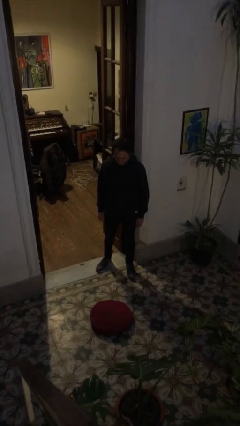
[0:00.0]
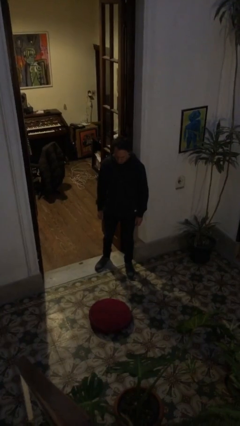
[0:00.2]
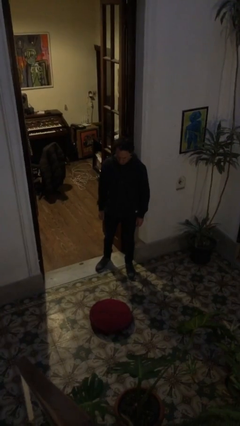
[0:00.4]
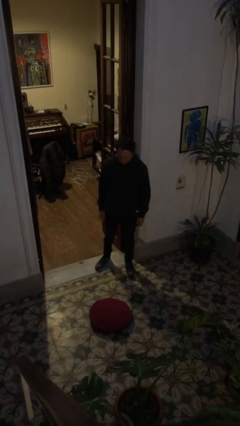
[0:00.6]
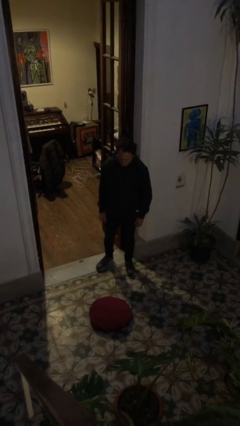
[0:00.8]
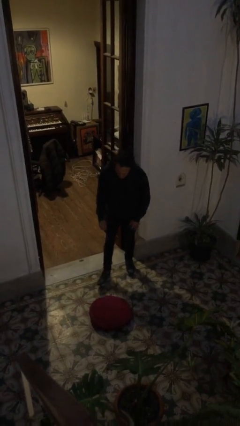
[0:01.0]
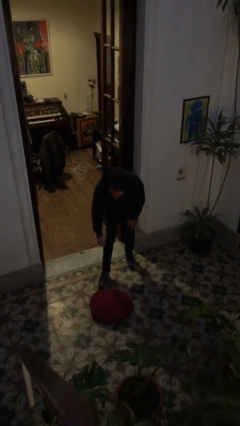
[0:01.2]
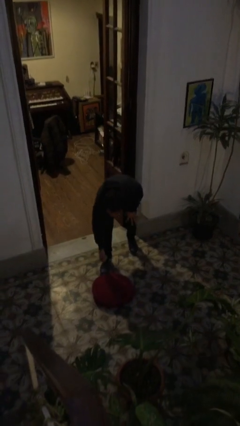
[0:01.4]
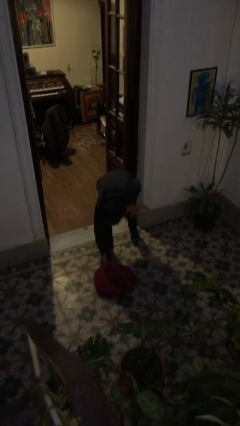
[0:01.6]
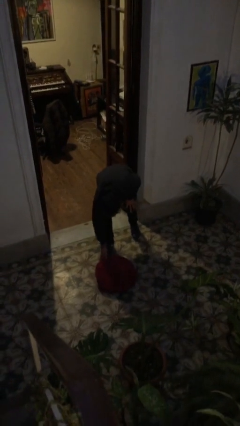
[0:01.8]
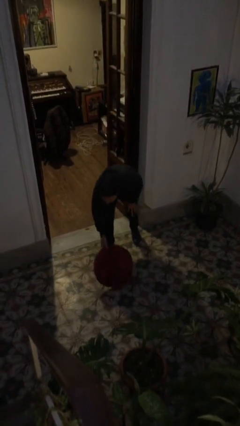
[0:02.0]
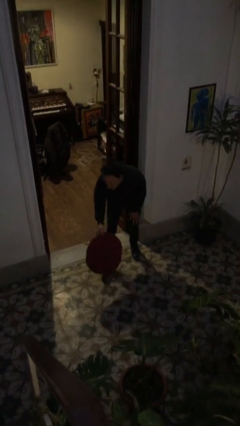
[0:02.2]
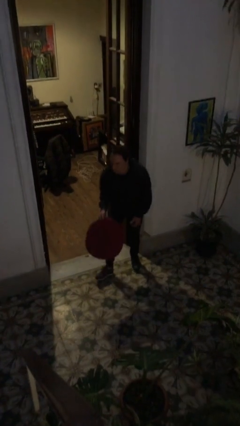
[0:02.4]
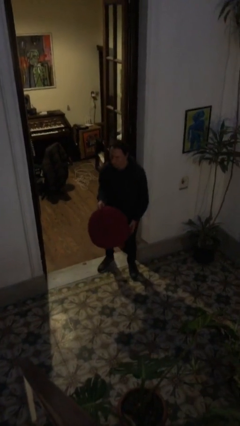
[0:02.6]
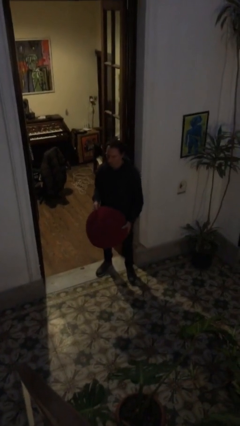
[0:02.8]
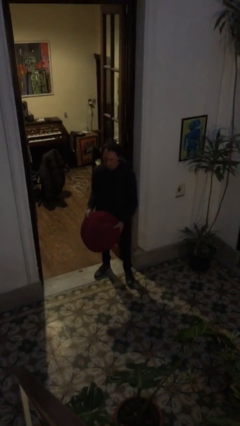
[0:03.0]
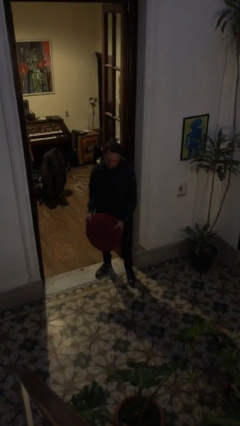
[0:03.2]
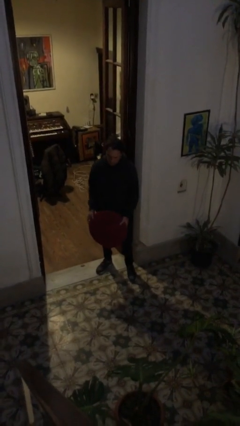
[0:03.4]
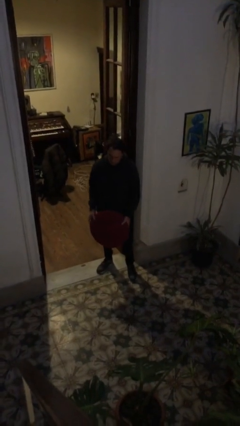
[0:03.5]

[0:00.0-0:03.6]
person picks up object from floor

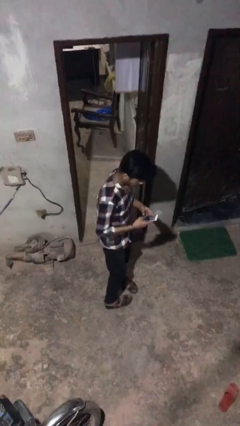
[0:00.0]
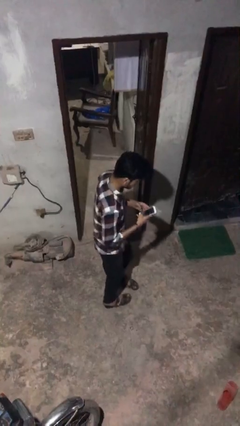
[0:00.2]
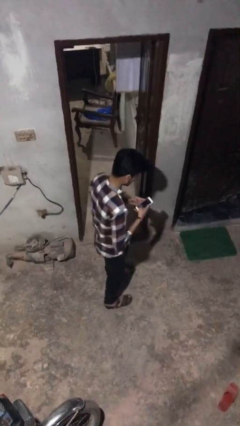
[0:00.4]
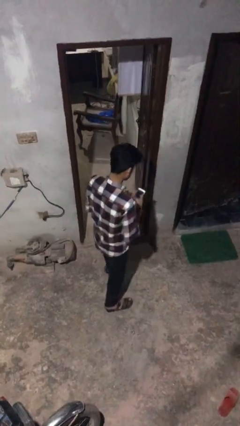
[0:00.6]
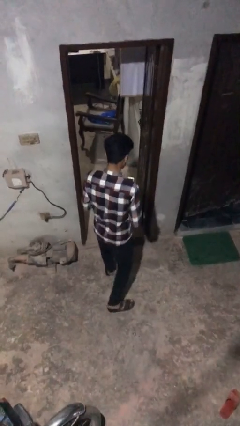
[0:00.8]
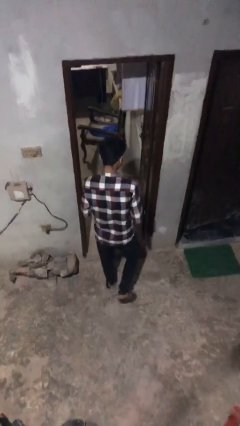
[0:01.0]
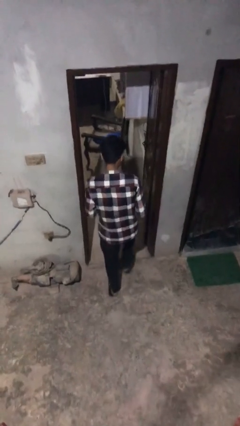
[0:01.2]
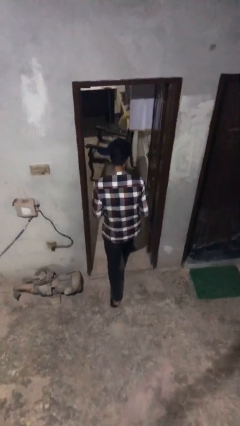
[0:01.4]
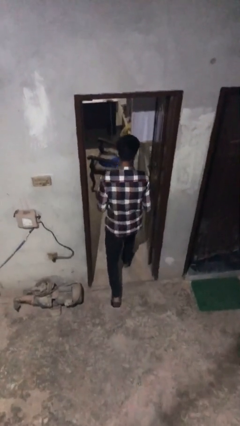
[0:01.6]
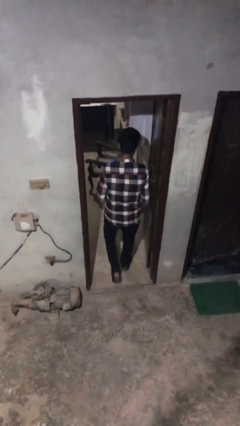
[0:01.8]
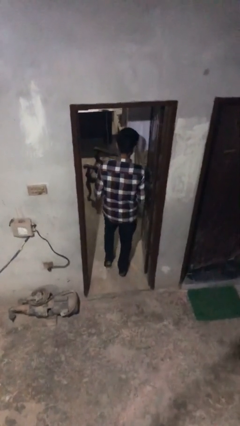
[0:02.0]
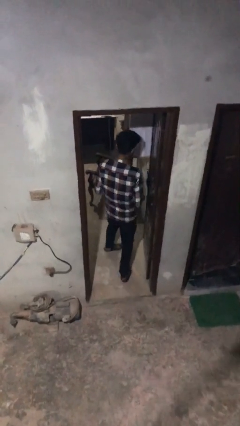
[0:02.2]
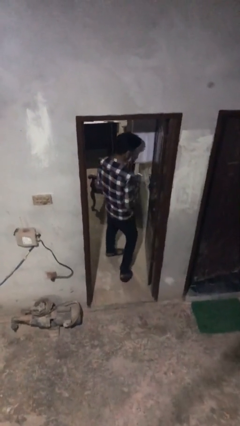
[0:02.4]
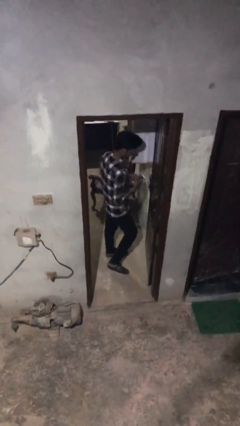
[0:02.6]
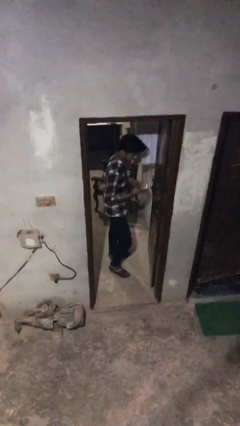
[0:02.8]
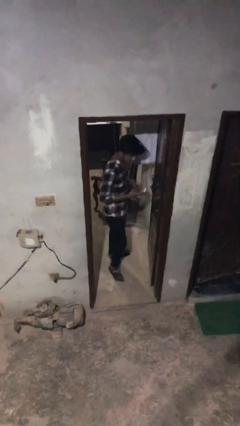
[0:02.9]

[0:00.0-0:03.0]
person exits scene through structure

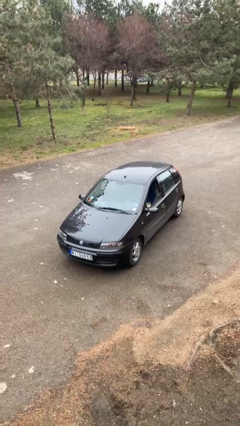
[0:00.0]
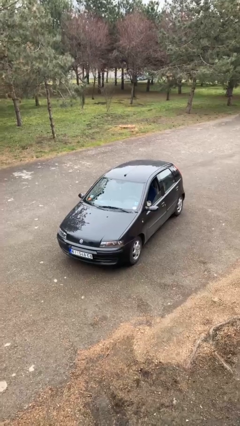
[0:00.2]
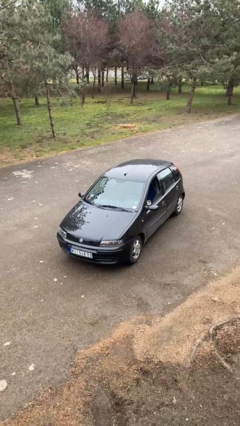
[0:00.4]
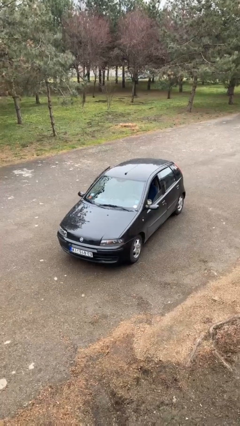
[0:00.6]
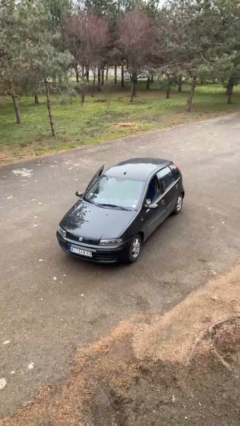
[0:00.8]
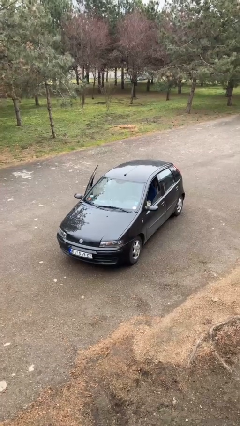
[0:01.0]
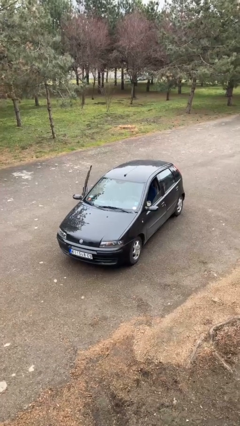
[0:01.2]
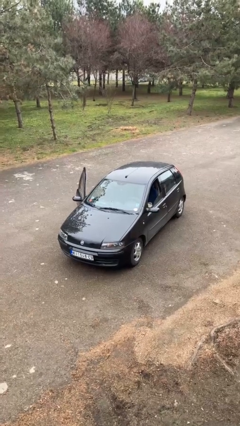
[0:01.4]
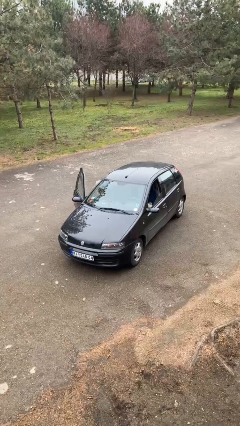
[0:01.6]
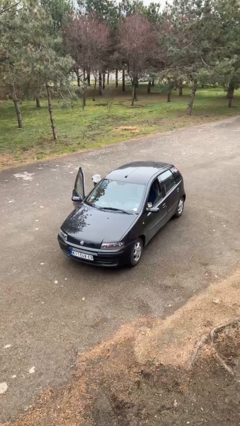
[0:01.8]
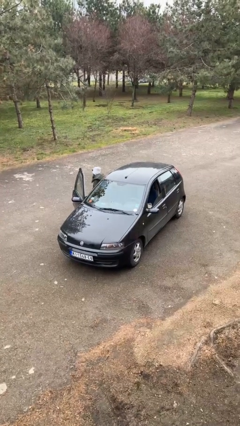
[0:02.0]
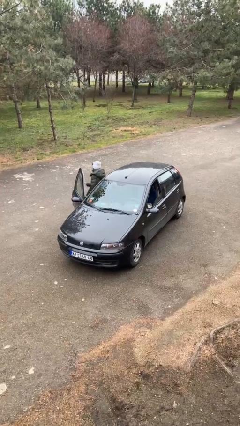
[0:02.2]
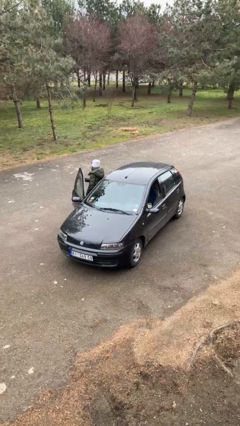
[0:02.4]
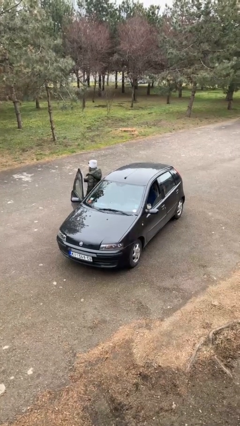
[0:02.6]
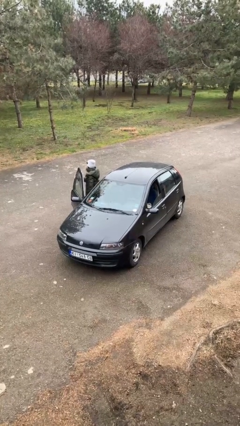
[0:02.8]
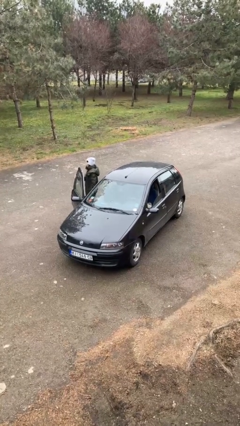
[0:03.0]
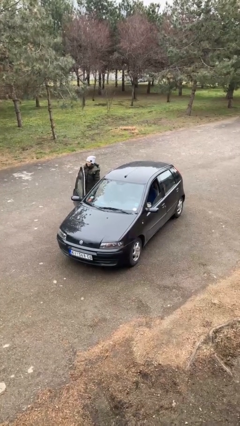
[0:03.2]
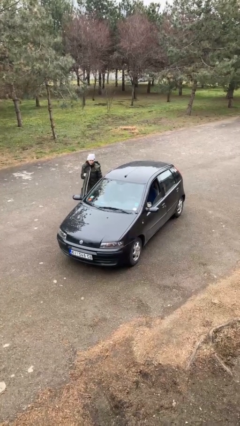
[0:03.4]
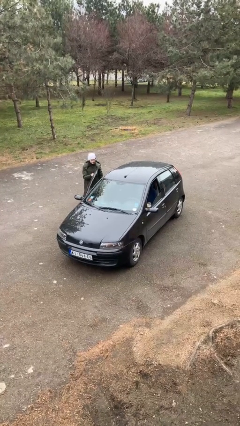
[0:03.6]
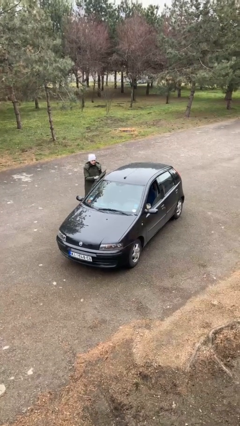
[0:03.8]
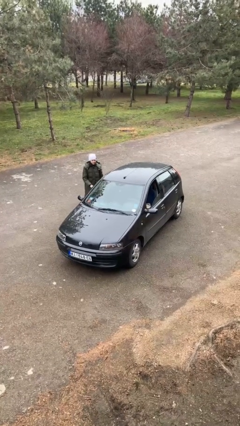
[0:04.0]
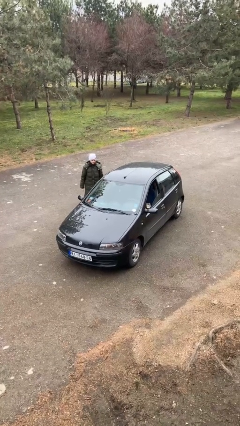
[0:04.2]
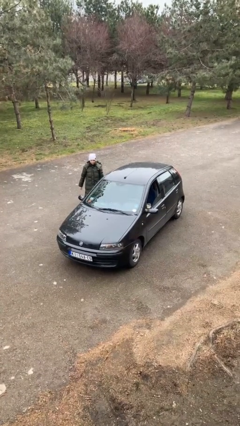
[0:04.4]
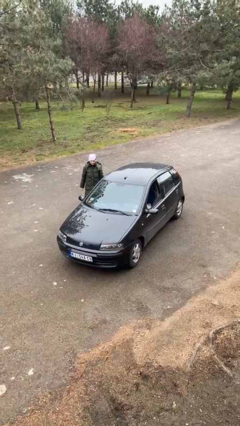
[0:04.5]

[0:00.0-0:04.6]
car drops off person

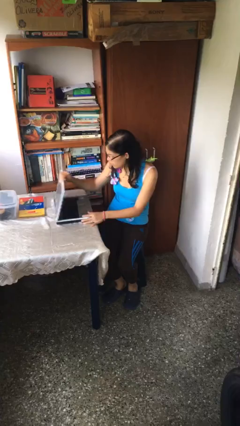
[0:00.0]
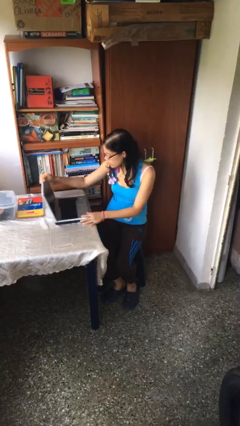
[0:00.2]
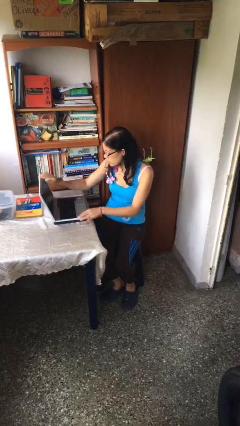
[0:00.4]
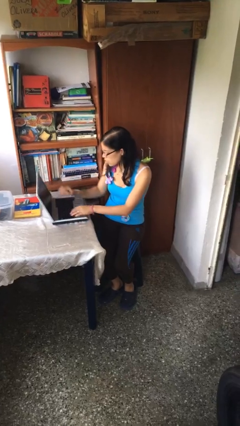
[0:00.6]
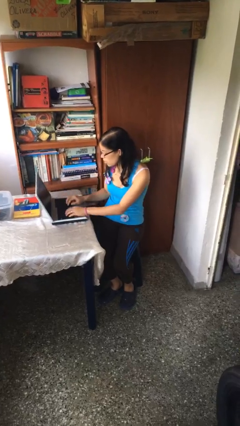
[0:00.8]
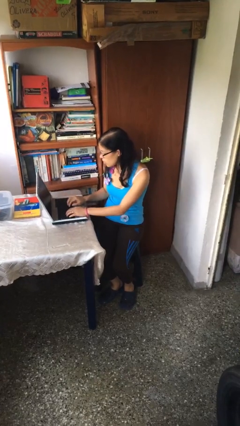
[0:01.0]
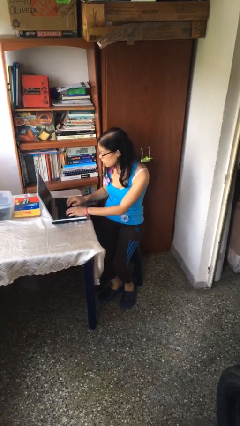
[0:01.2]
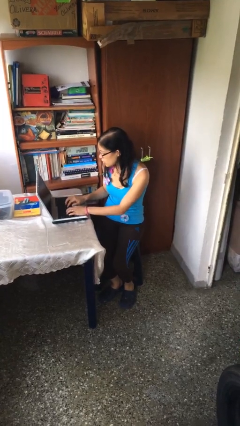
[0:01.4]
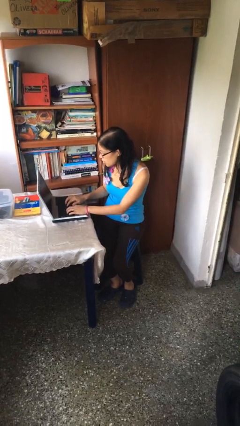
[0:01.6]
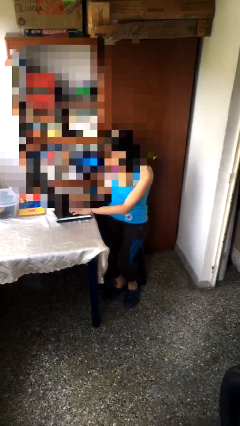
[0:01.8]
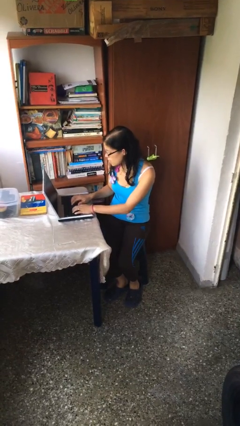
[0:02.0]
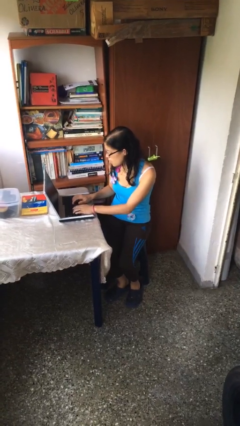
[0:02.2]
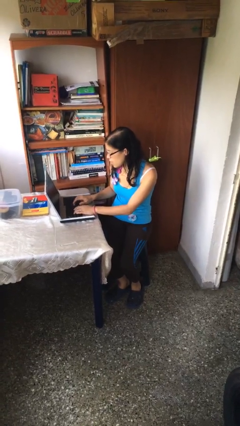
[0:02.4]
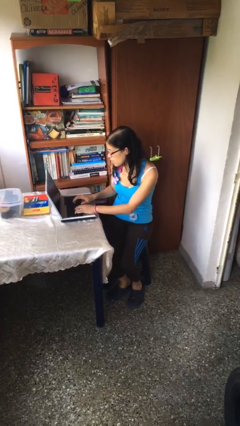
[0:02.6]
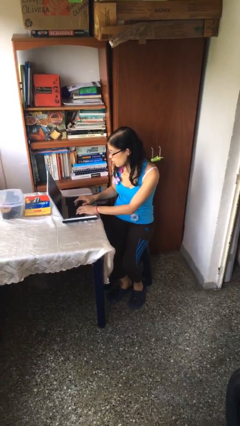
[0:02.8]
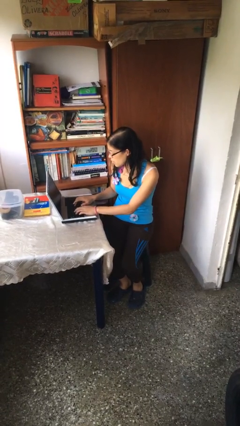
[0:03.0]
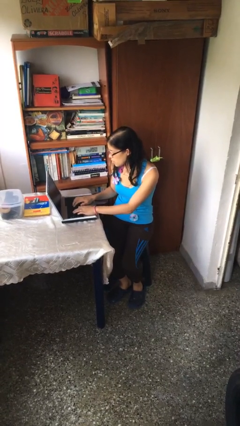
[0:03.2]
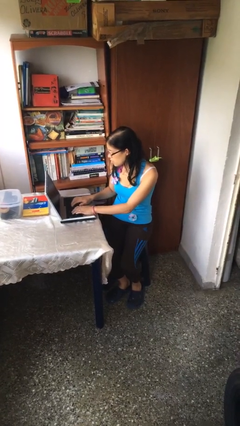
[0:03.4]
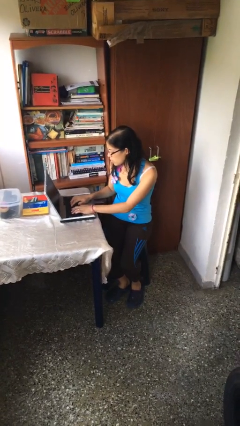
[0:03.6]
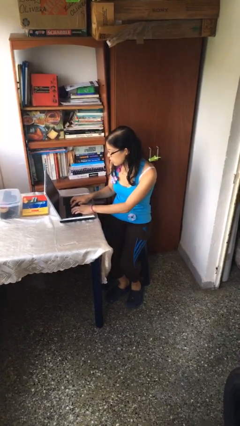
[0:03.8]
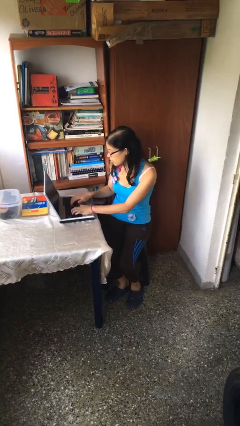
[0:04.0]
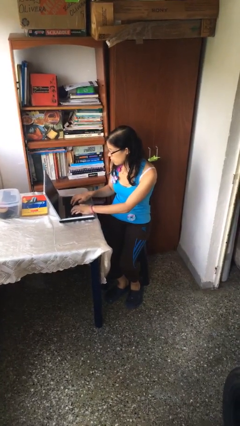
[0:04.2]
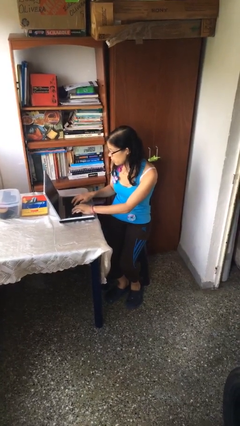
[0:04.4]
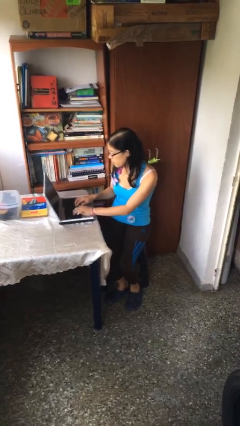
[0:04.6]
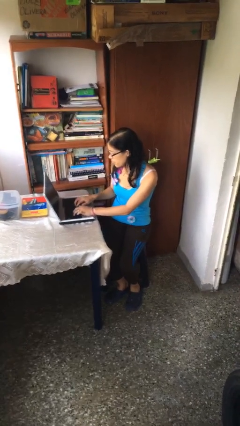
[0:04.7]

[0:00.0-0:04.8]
person interacts with laptop

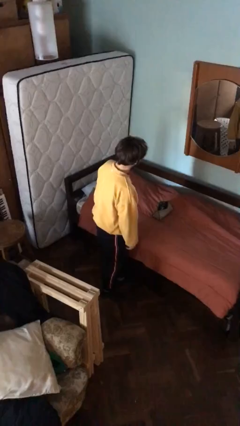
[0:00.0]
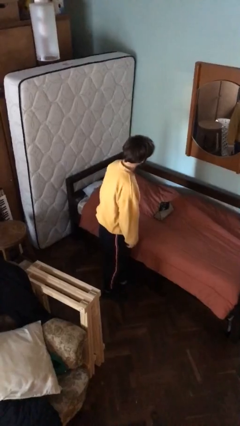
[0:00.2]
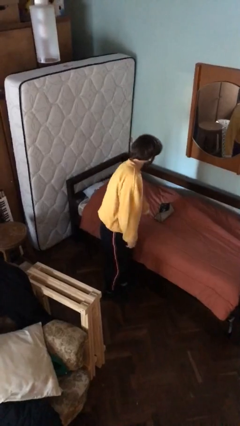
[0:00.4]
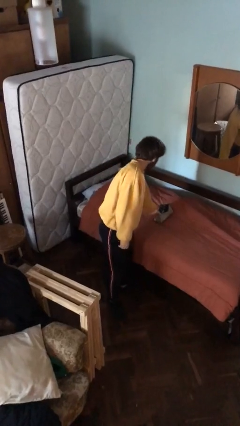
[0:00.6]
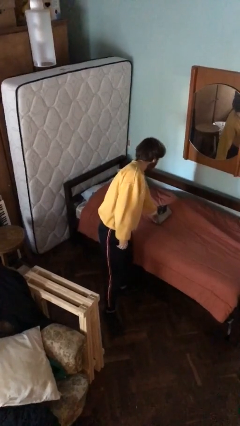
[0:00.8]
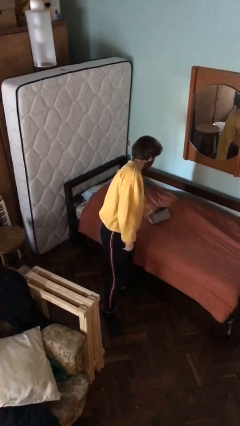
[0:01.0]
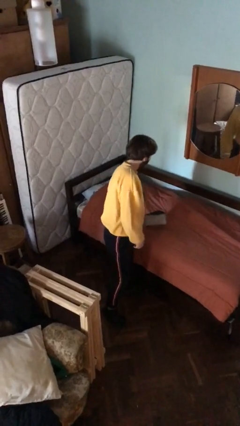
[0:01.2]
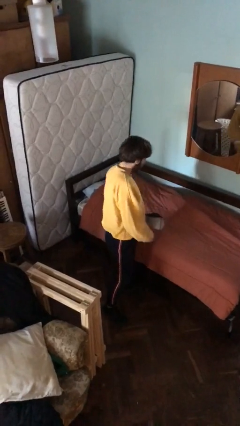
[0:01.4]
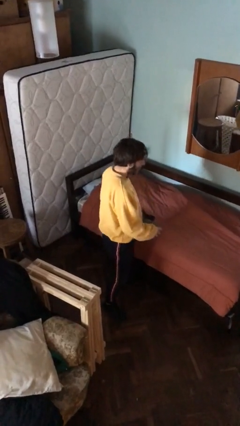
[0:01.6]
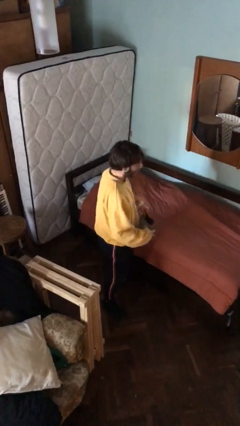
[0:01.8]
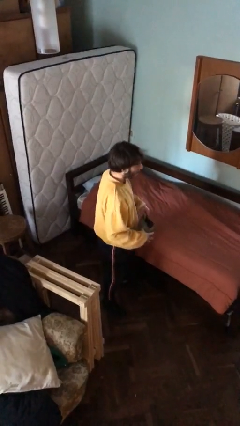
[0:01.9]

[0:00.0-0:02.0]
person picks up object from bed
